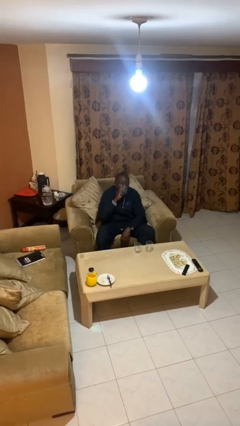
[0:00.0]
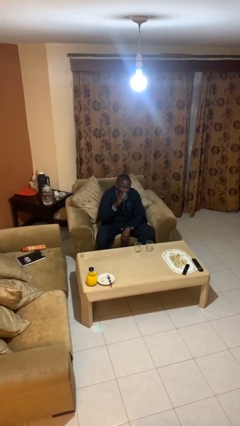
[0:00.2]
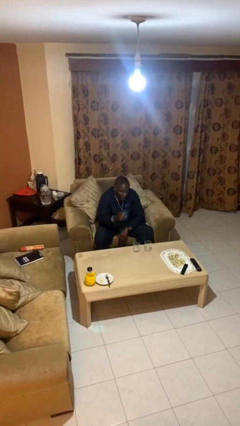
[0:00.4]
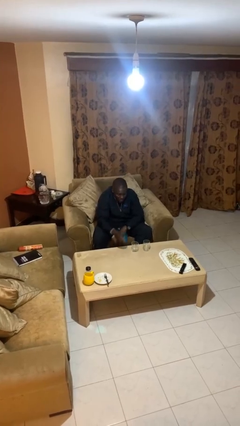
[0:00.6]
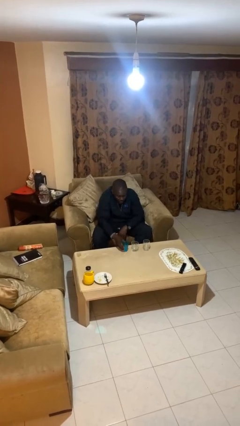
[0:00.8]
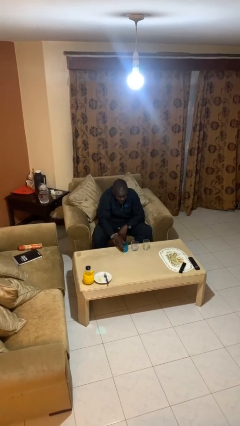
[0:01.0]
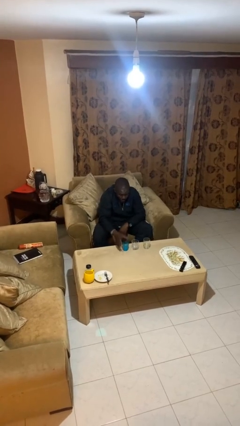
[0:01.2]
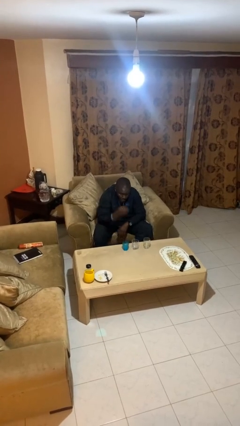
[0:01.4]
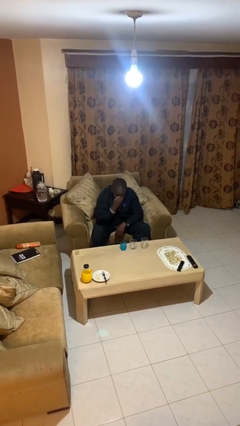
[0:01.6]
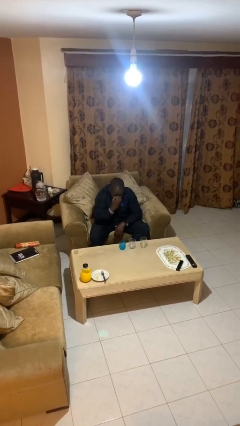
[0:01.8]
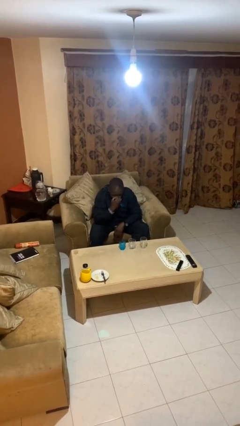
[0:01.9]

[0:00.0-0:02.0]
person puts down object on table

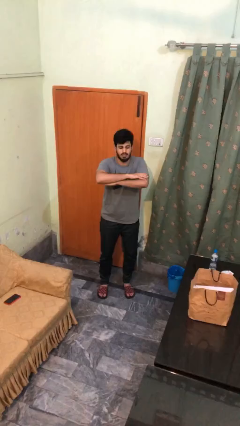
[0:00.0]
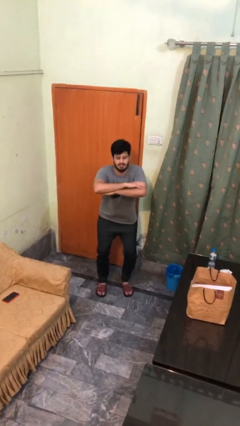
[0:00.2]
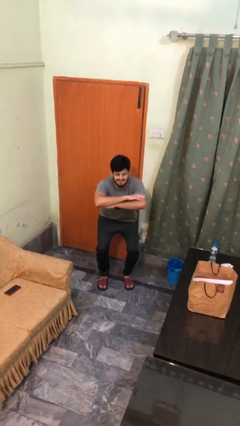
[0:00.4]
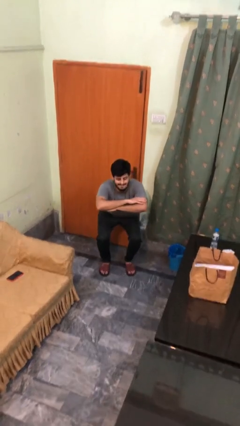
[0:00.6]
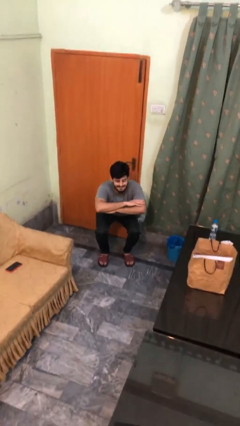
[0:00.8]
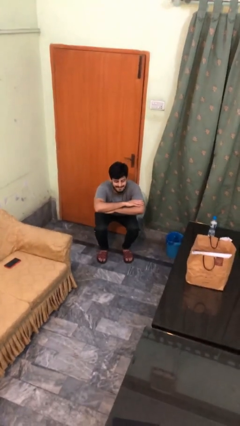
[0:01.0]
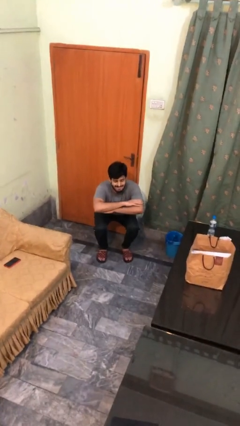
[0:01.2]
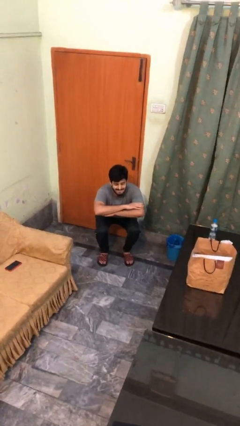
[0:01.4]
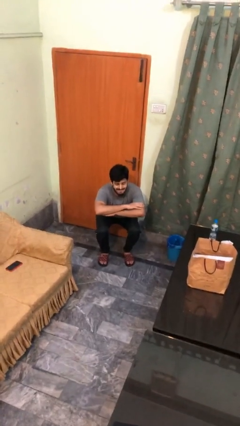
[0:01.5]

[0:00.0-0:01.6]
person squats

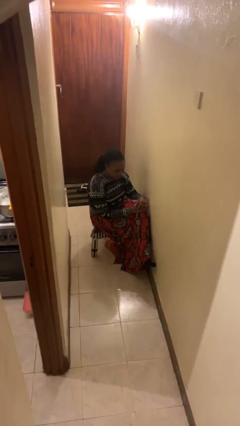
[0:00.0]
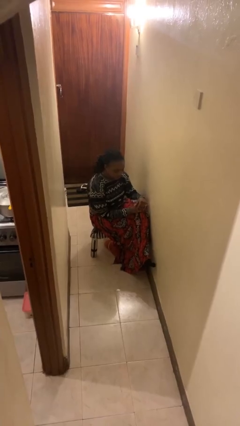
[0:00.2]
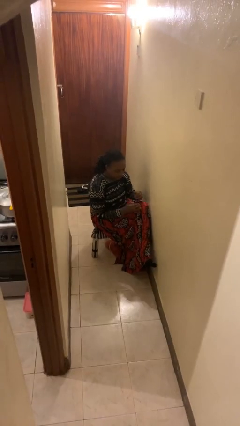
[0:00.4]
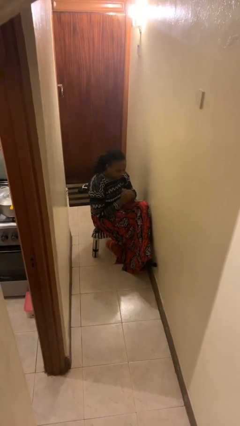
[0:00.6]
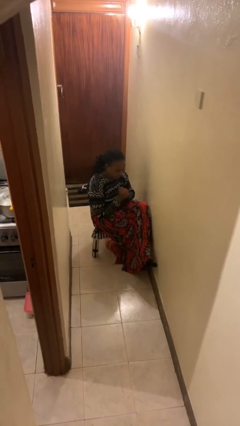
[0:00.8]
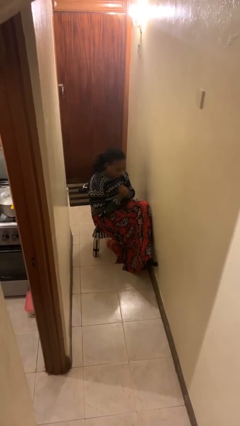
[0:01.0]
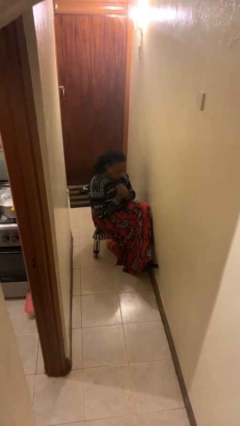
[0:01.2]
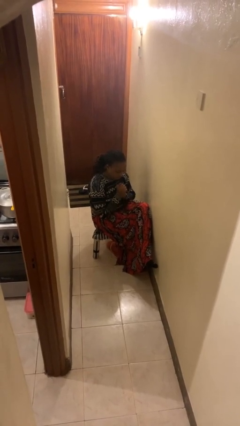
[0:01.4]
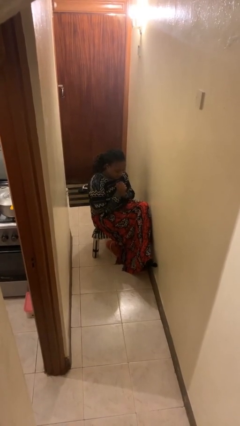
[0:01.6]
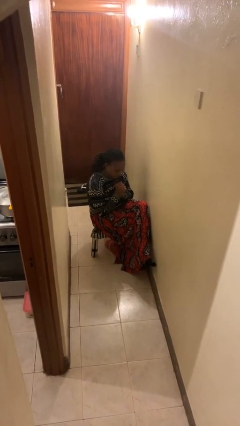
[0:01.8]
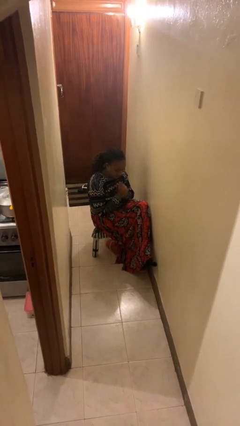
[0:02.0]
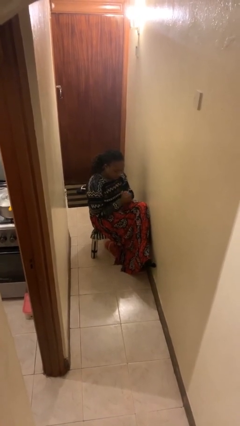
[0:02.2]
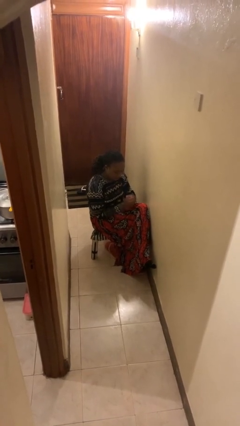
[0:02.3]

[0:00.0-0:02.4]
person cracks knuckles

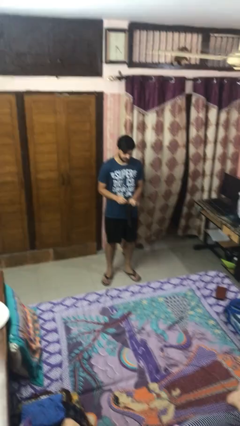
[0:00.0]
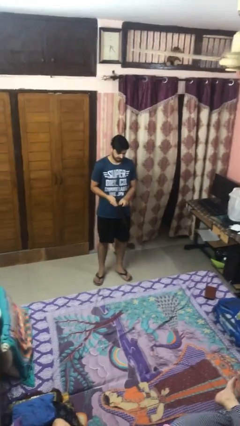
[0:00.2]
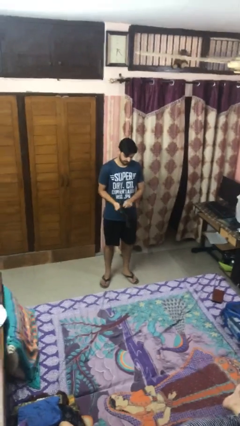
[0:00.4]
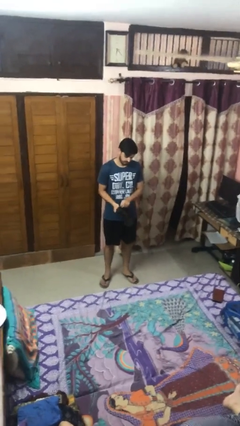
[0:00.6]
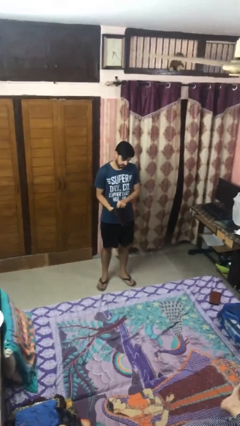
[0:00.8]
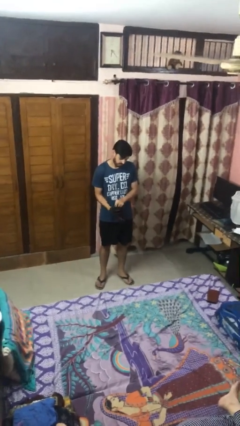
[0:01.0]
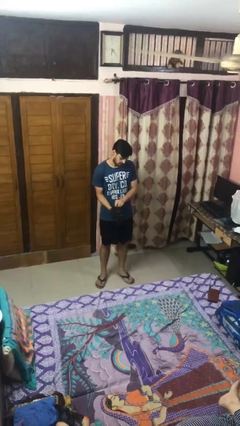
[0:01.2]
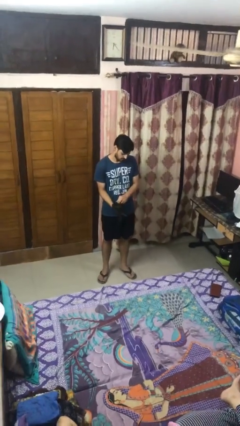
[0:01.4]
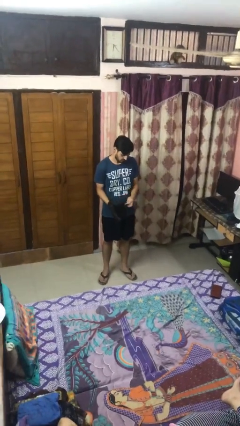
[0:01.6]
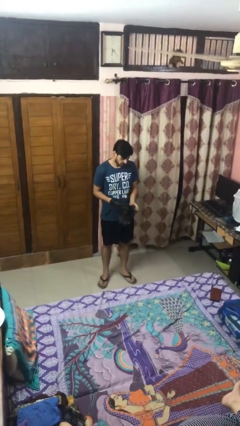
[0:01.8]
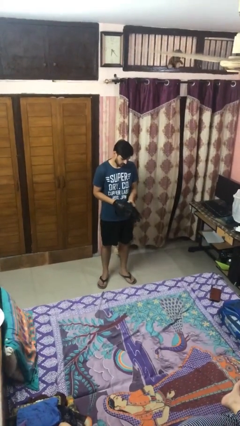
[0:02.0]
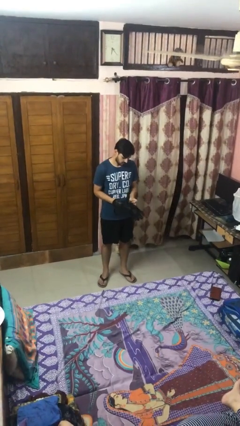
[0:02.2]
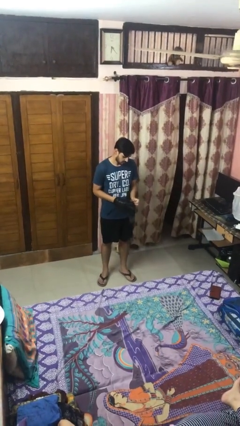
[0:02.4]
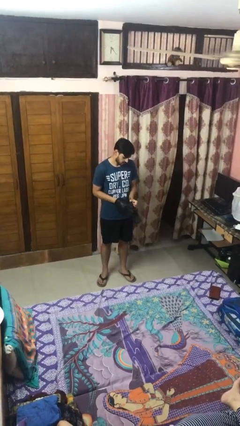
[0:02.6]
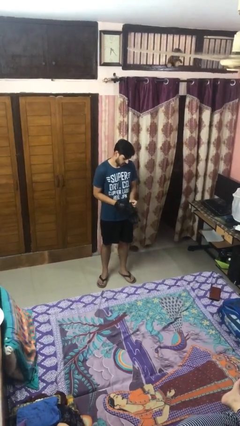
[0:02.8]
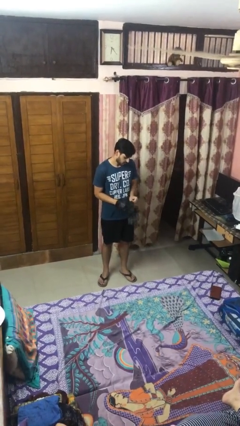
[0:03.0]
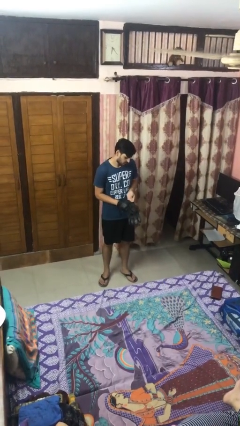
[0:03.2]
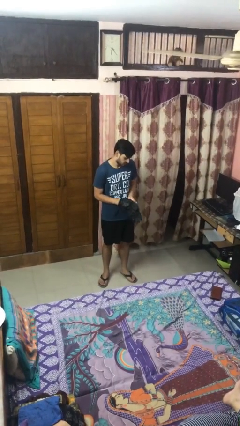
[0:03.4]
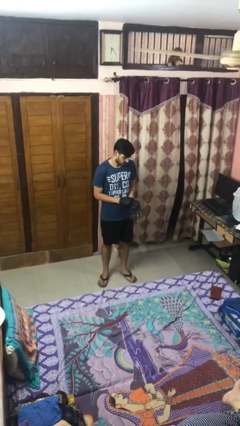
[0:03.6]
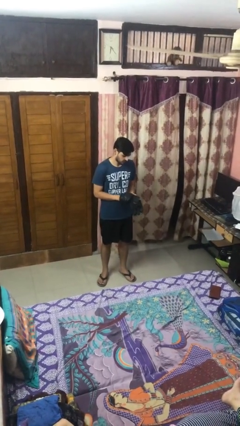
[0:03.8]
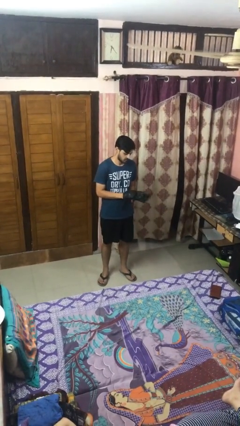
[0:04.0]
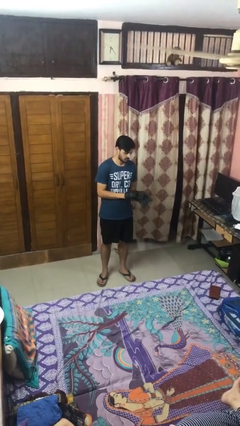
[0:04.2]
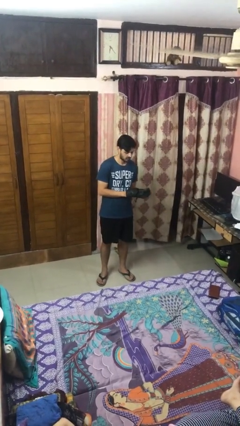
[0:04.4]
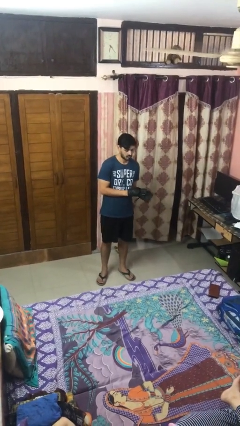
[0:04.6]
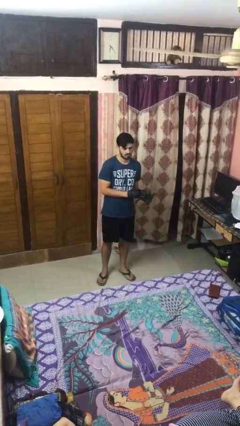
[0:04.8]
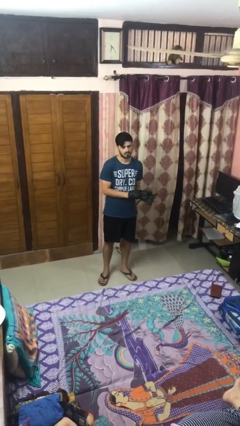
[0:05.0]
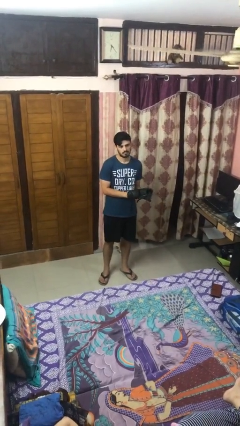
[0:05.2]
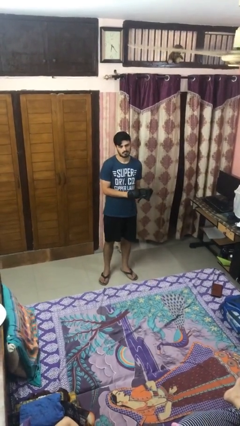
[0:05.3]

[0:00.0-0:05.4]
person puts on gloves

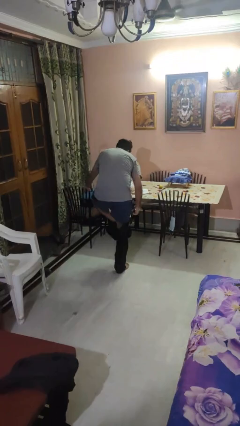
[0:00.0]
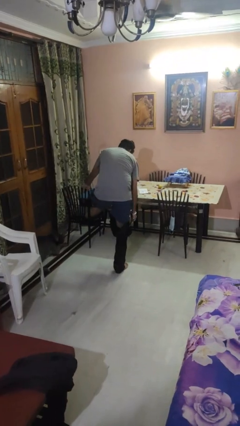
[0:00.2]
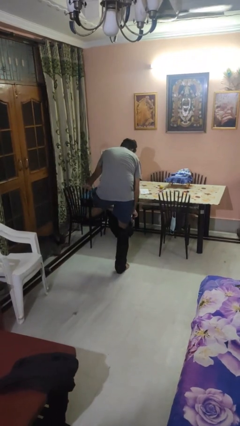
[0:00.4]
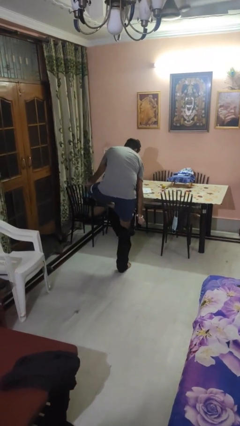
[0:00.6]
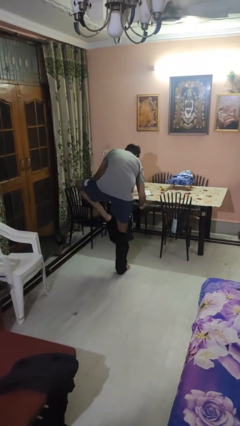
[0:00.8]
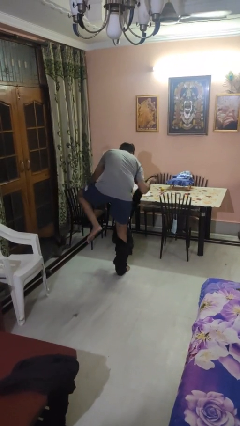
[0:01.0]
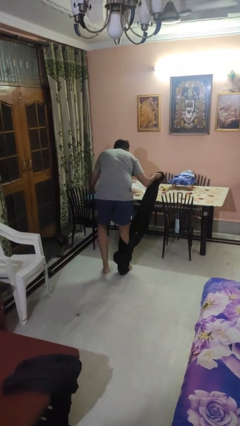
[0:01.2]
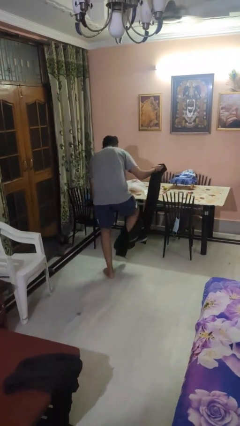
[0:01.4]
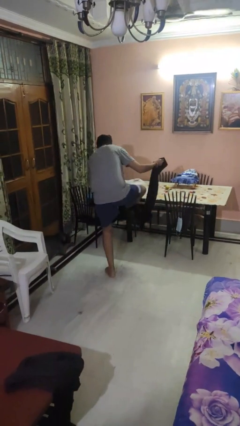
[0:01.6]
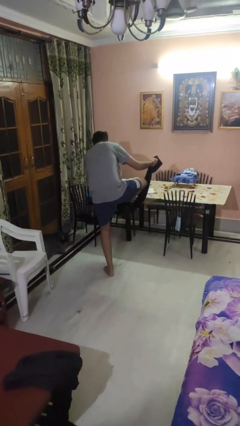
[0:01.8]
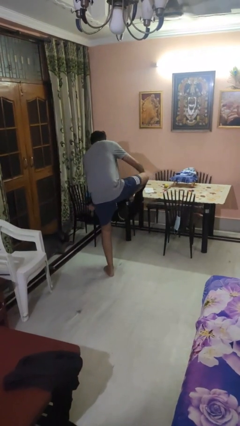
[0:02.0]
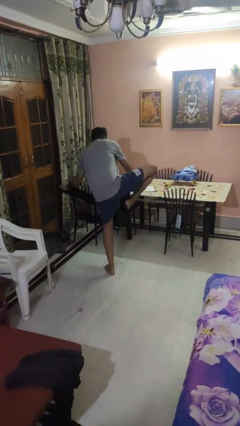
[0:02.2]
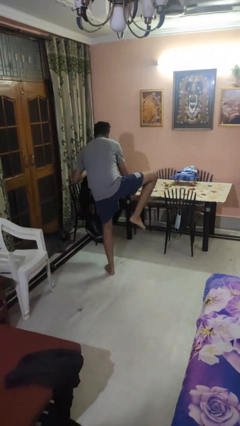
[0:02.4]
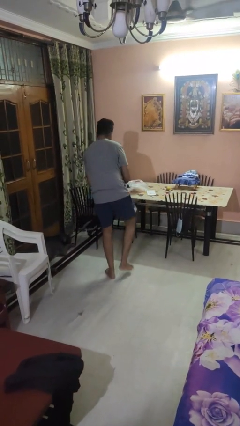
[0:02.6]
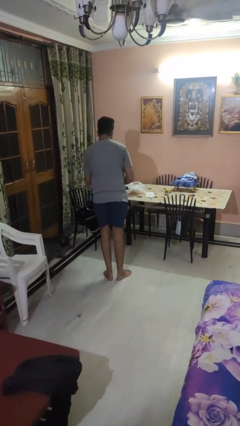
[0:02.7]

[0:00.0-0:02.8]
person takes off pants

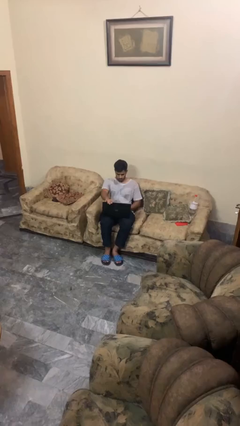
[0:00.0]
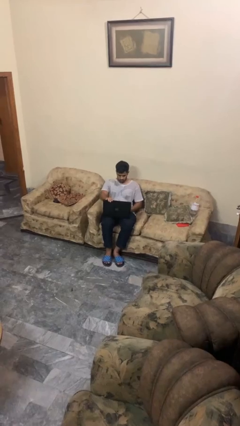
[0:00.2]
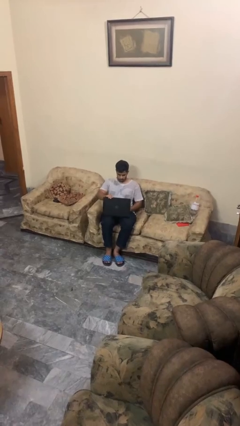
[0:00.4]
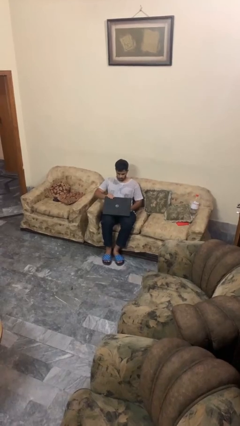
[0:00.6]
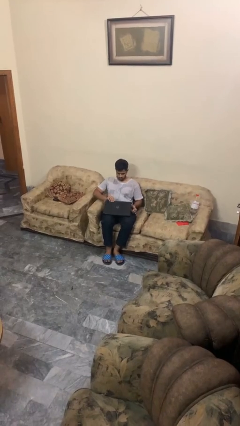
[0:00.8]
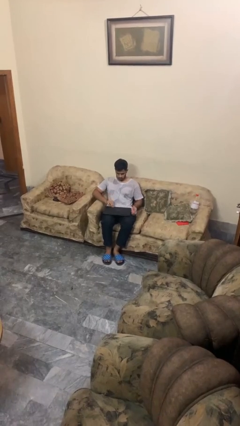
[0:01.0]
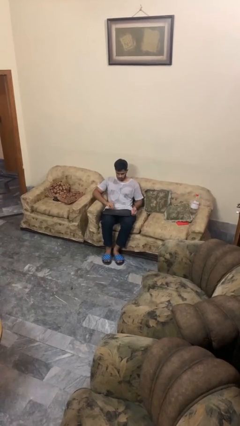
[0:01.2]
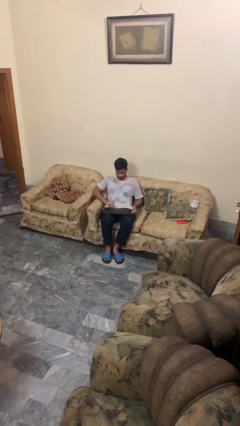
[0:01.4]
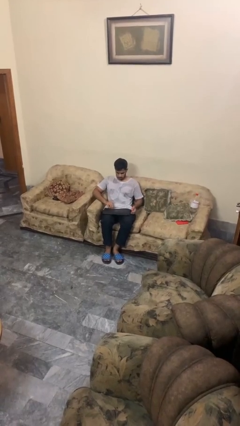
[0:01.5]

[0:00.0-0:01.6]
person closes laptop

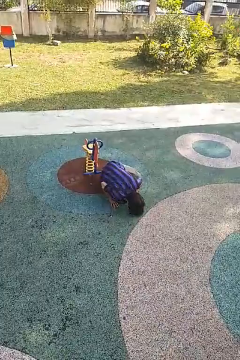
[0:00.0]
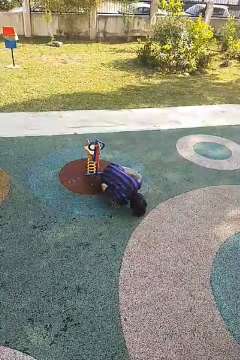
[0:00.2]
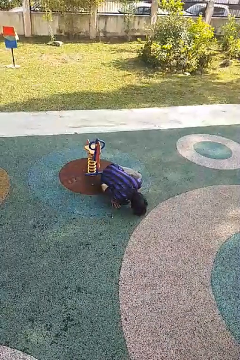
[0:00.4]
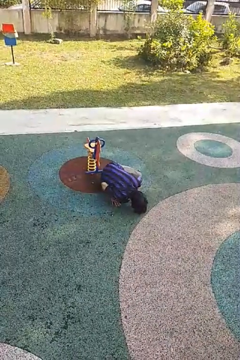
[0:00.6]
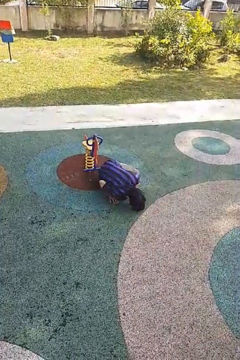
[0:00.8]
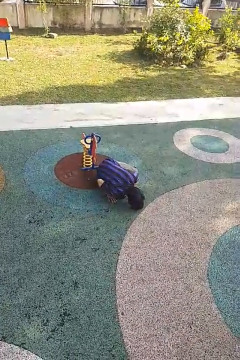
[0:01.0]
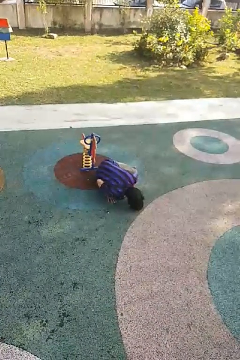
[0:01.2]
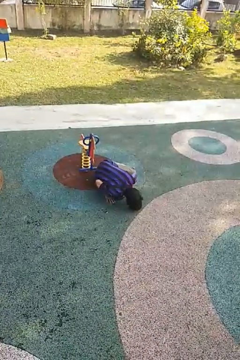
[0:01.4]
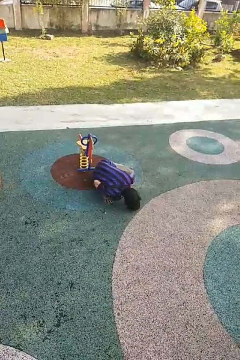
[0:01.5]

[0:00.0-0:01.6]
person lies down on floor
